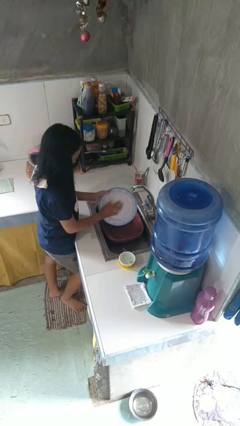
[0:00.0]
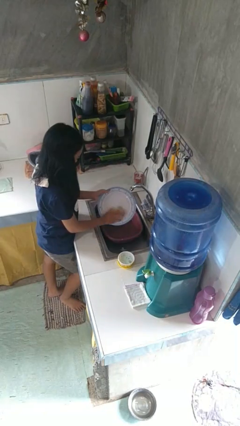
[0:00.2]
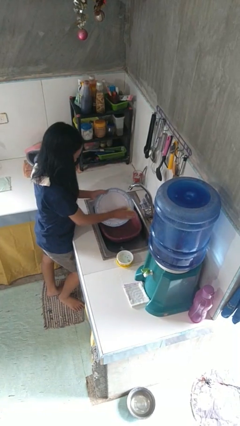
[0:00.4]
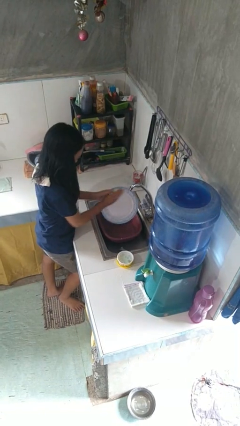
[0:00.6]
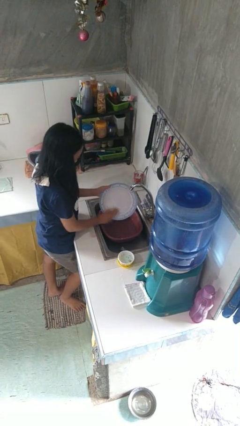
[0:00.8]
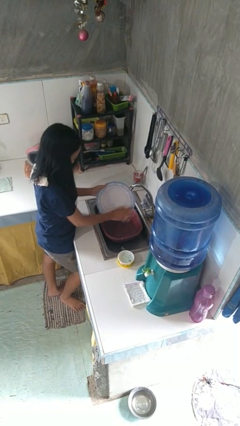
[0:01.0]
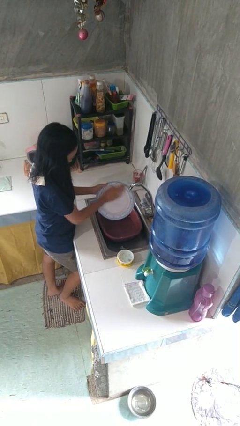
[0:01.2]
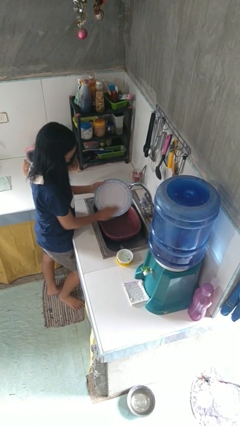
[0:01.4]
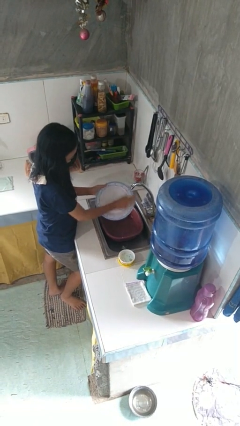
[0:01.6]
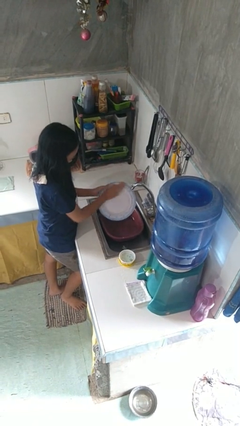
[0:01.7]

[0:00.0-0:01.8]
person washes dish

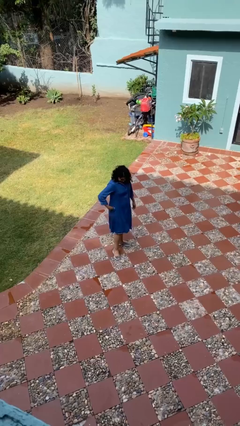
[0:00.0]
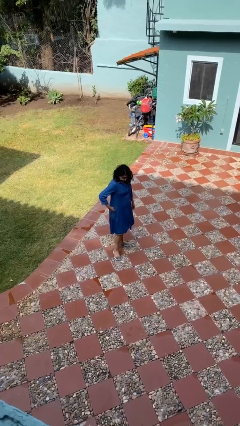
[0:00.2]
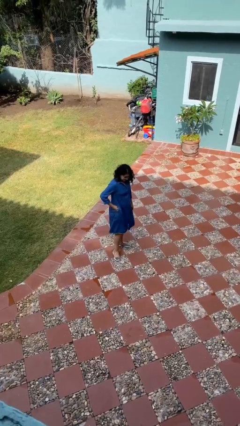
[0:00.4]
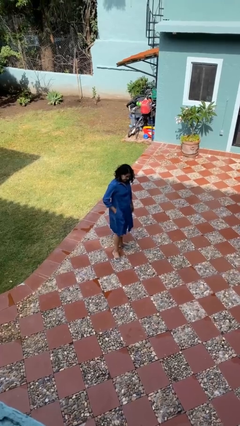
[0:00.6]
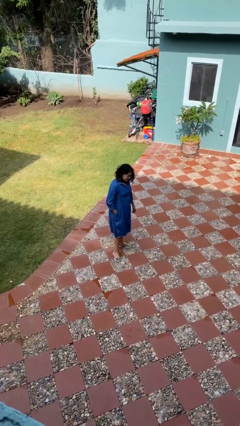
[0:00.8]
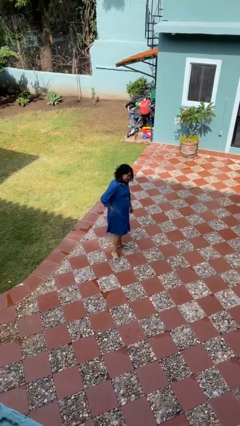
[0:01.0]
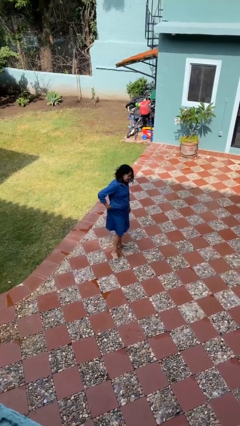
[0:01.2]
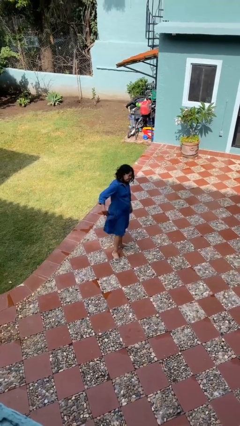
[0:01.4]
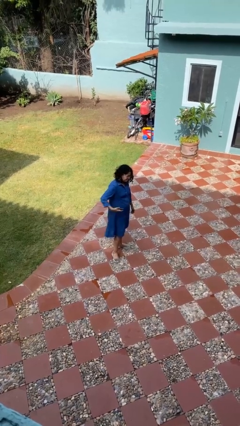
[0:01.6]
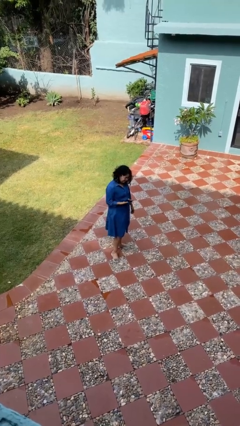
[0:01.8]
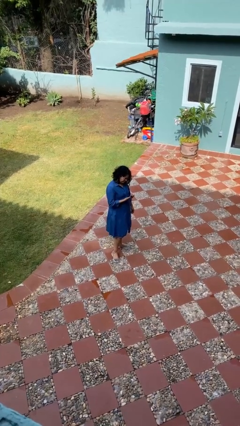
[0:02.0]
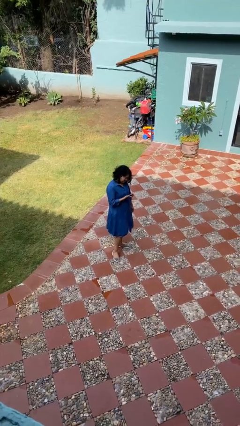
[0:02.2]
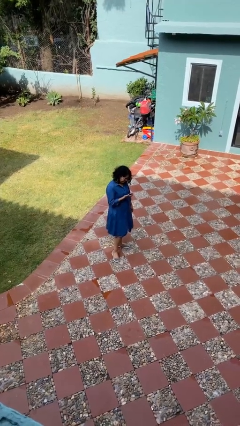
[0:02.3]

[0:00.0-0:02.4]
person takes phone from pocket

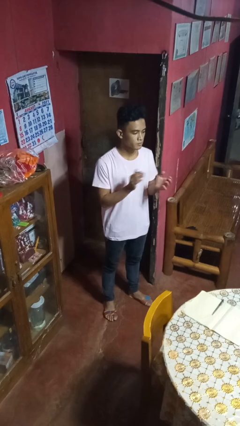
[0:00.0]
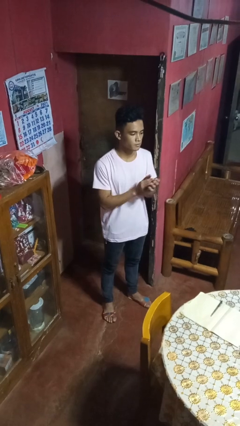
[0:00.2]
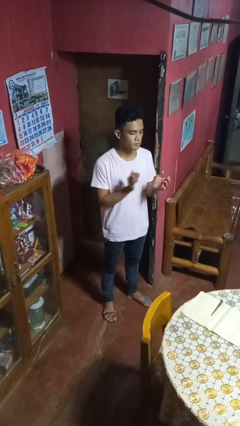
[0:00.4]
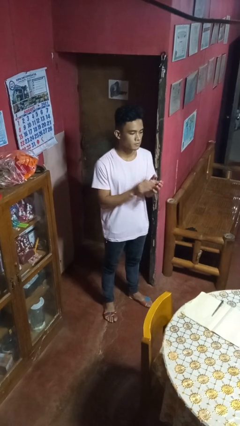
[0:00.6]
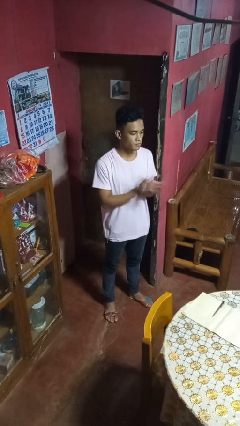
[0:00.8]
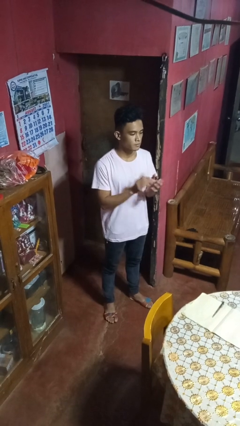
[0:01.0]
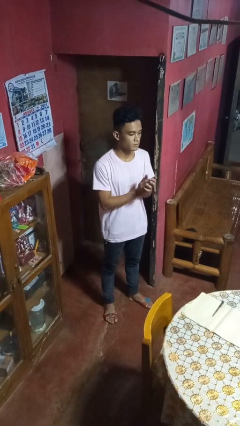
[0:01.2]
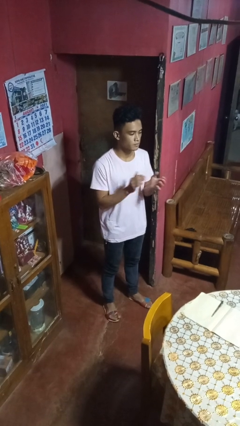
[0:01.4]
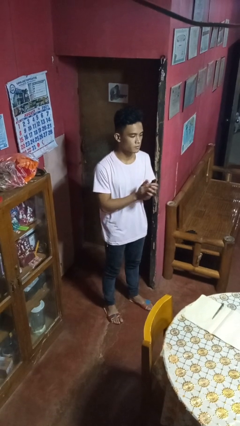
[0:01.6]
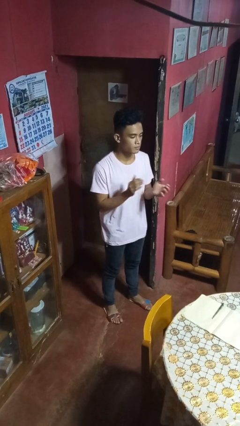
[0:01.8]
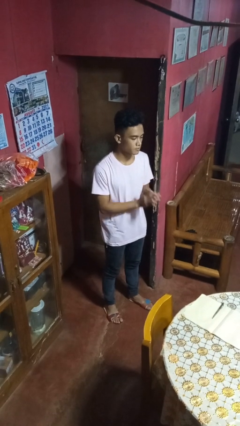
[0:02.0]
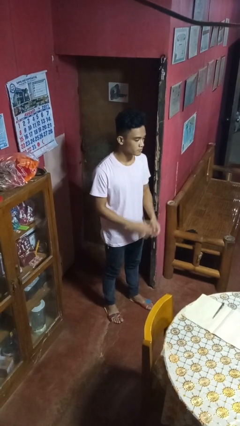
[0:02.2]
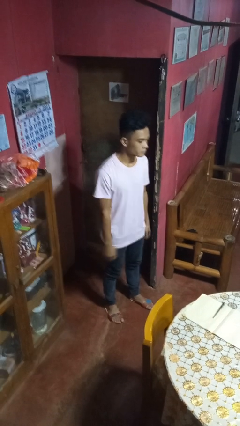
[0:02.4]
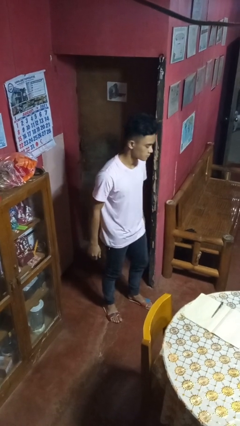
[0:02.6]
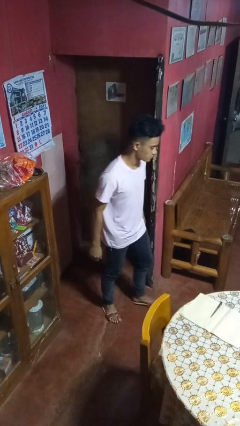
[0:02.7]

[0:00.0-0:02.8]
person claps hands

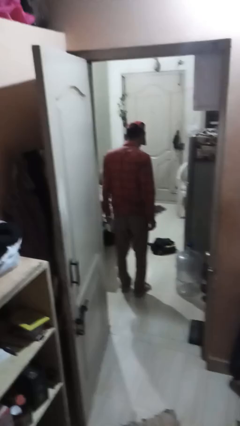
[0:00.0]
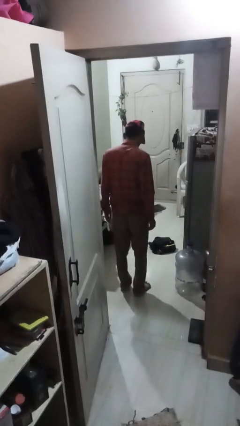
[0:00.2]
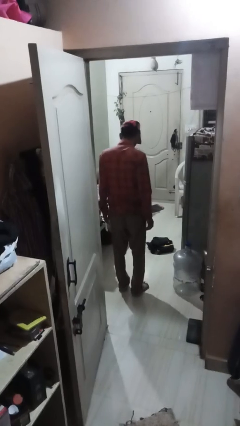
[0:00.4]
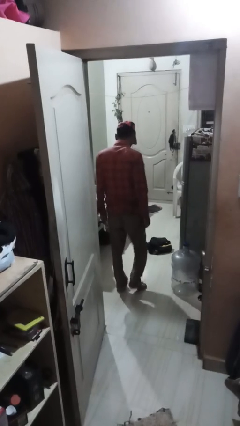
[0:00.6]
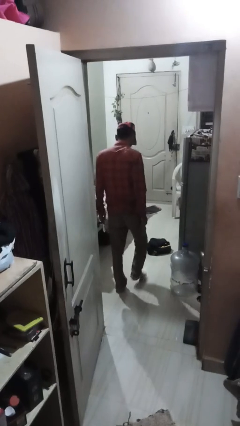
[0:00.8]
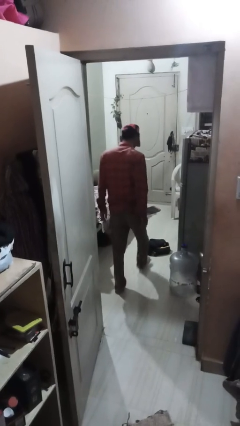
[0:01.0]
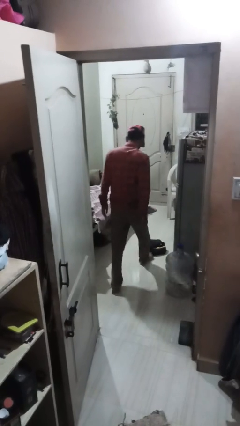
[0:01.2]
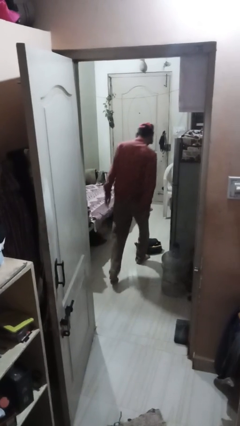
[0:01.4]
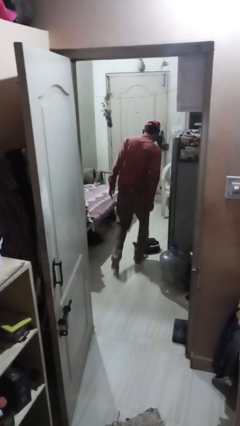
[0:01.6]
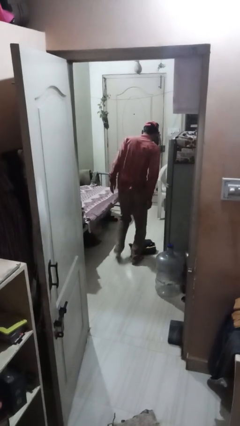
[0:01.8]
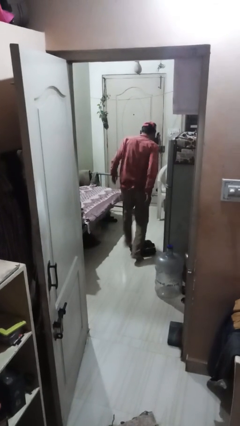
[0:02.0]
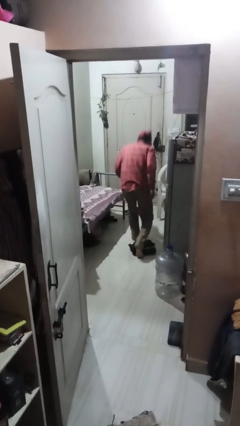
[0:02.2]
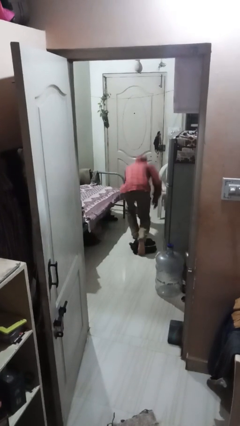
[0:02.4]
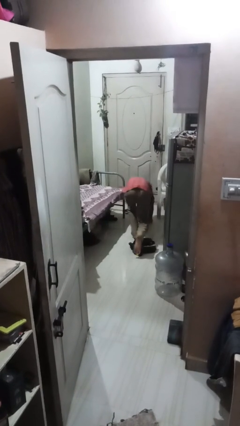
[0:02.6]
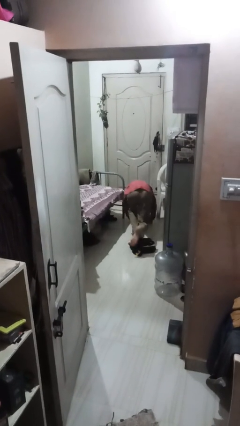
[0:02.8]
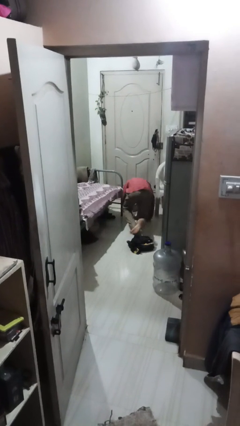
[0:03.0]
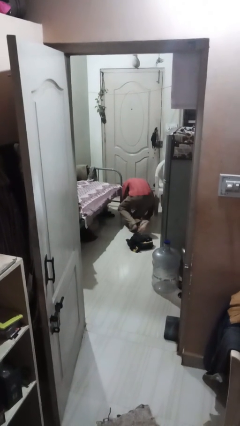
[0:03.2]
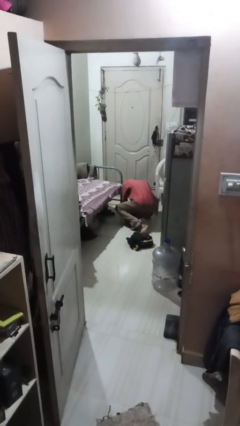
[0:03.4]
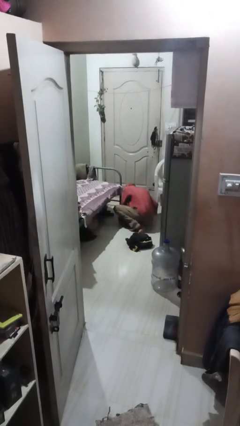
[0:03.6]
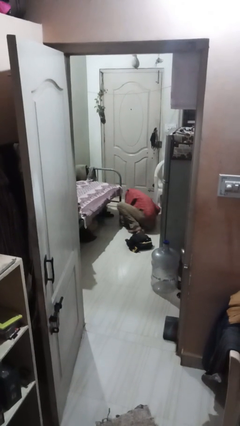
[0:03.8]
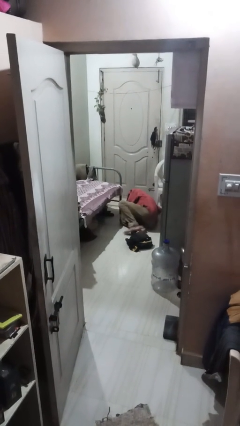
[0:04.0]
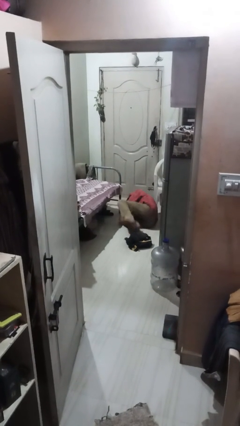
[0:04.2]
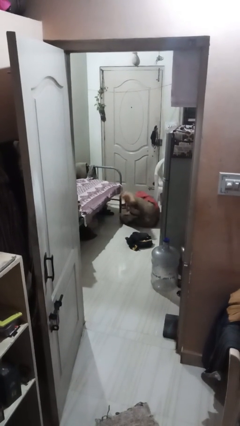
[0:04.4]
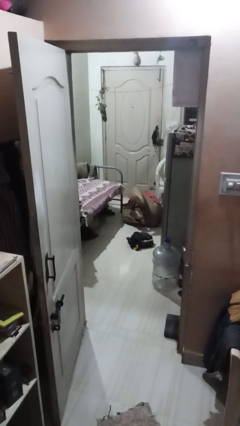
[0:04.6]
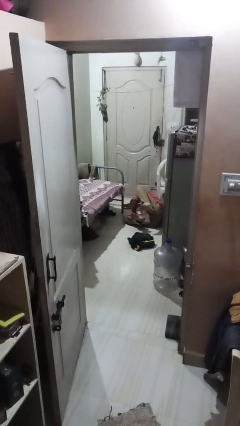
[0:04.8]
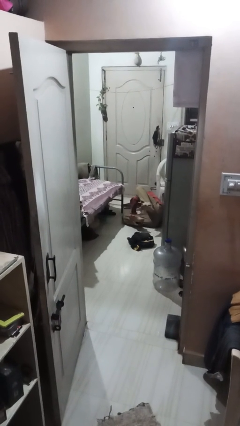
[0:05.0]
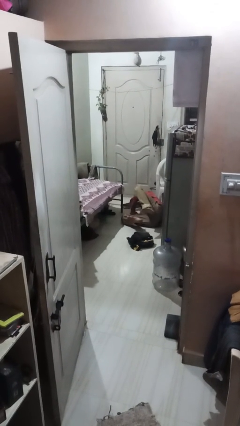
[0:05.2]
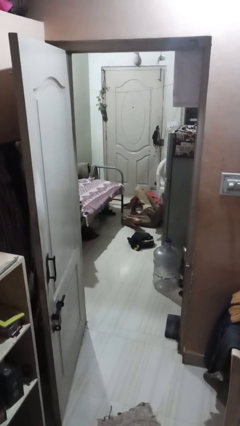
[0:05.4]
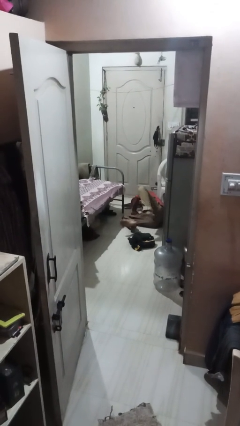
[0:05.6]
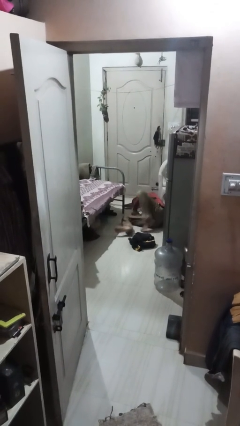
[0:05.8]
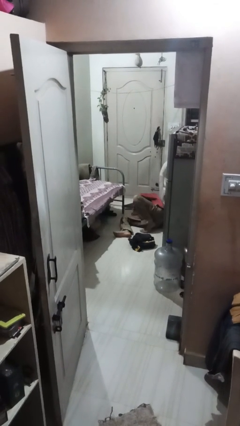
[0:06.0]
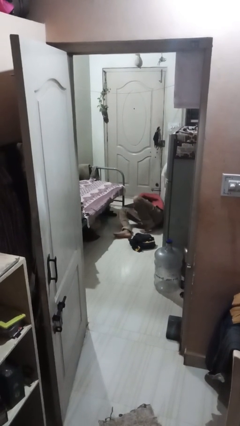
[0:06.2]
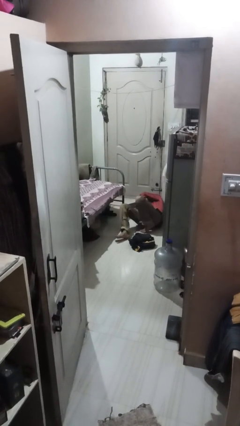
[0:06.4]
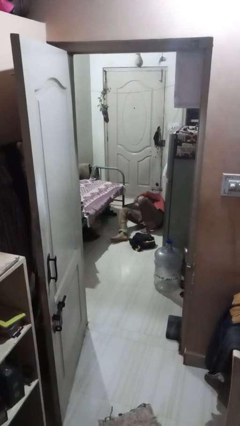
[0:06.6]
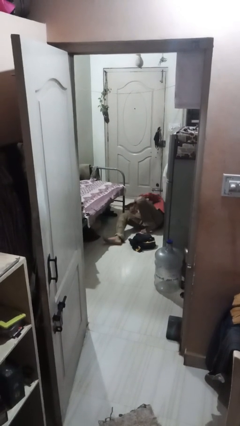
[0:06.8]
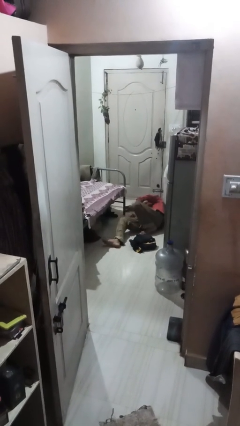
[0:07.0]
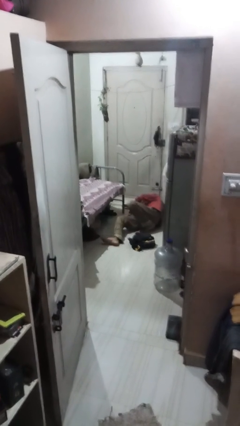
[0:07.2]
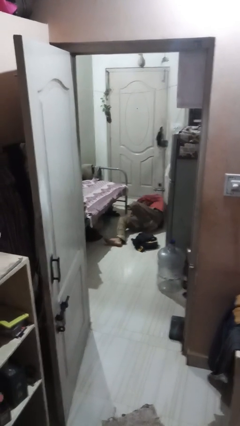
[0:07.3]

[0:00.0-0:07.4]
person trips on object on floor

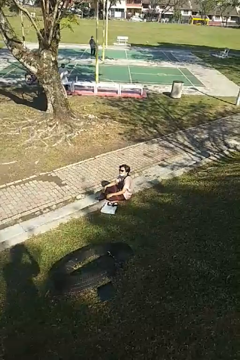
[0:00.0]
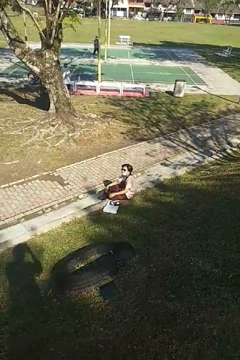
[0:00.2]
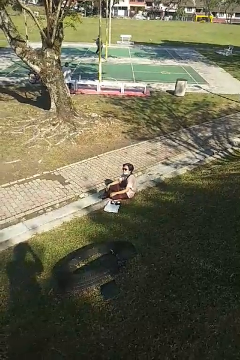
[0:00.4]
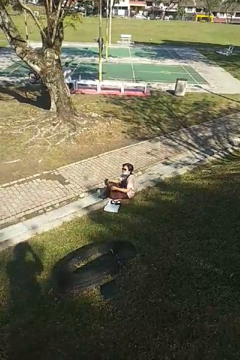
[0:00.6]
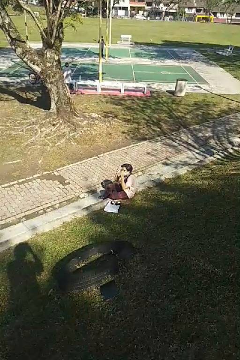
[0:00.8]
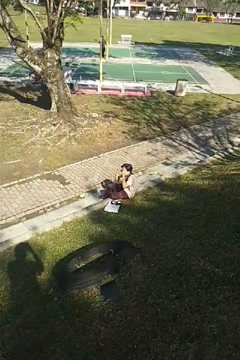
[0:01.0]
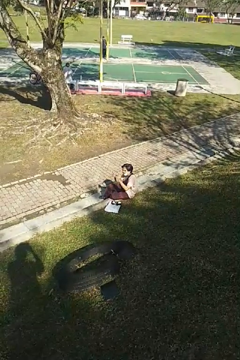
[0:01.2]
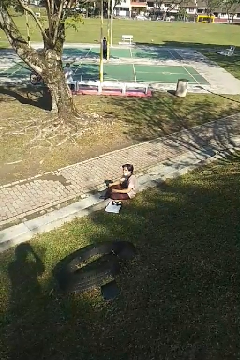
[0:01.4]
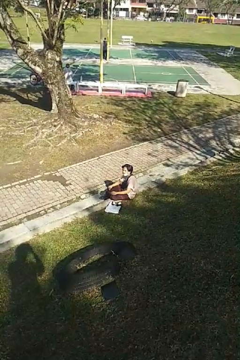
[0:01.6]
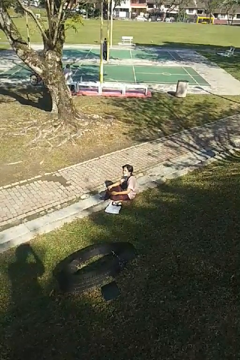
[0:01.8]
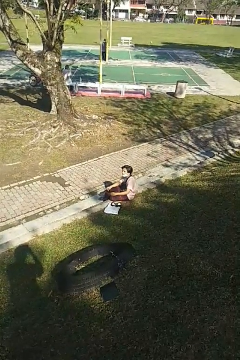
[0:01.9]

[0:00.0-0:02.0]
person takes off sunglasses

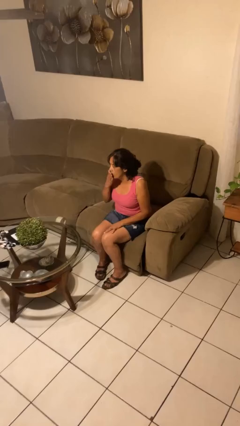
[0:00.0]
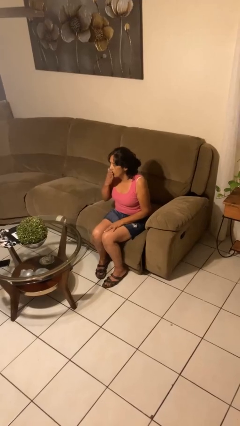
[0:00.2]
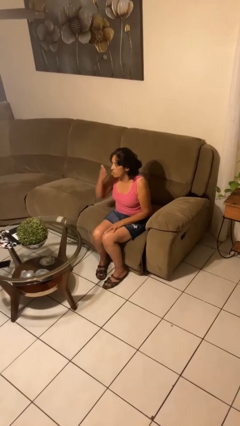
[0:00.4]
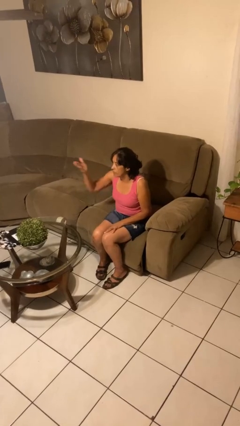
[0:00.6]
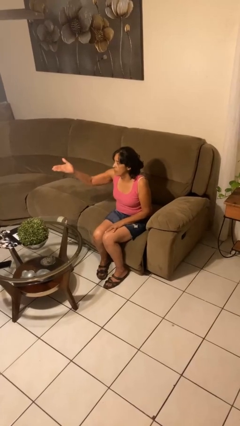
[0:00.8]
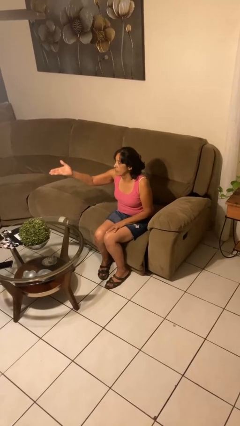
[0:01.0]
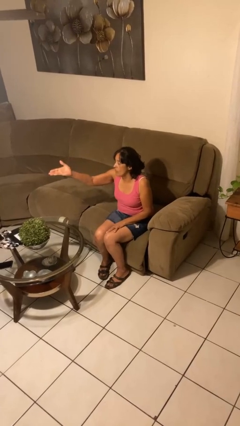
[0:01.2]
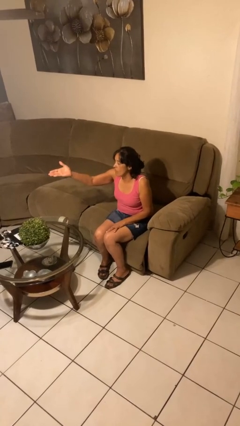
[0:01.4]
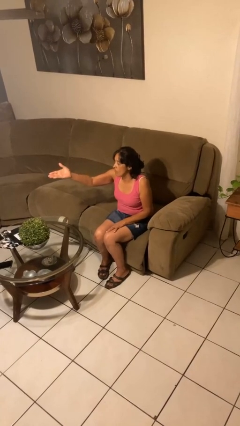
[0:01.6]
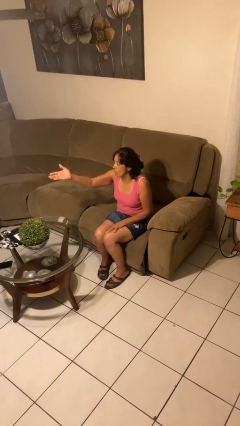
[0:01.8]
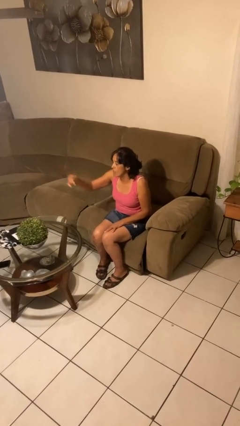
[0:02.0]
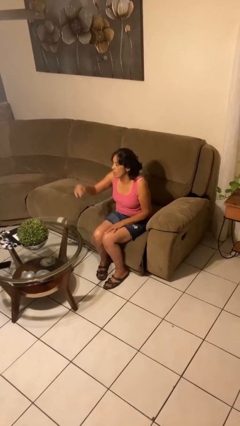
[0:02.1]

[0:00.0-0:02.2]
person gestures blow kiss
